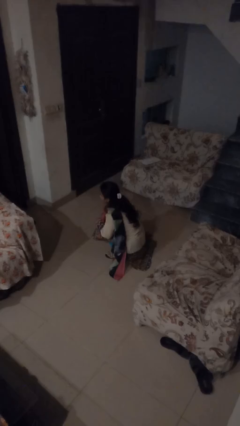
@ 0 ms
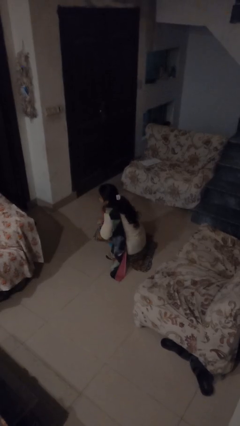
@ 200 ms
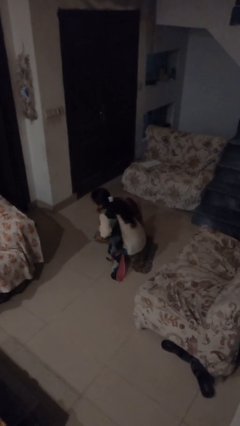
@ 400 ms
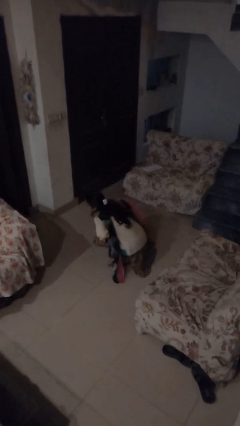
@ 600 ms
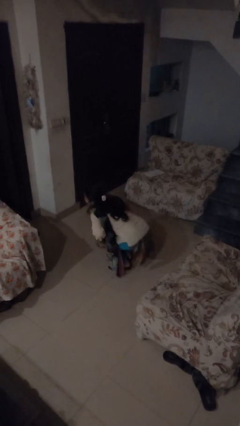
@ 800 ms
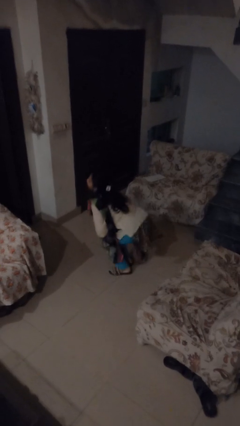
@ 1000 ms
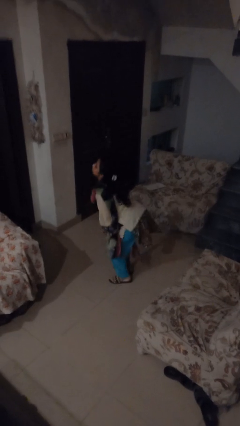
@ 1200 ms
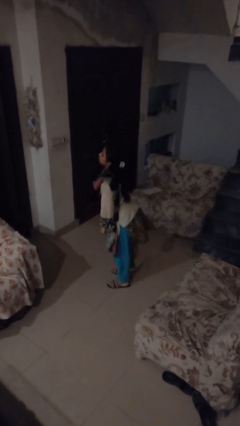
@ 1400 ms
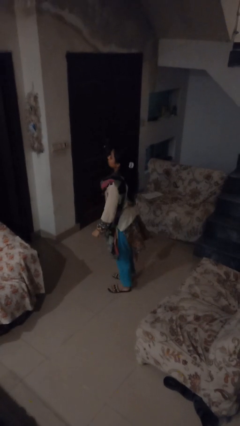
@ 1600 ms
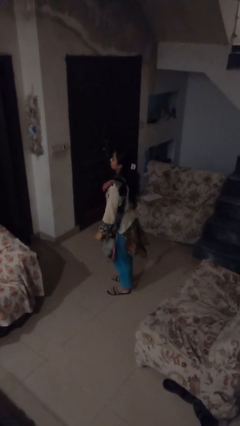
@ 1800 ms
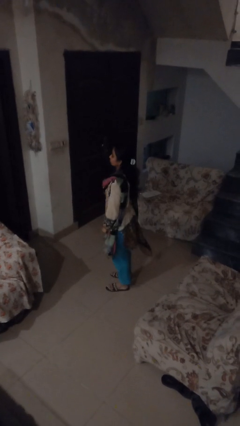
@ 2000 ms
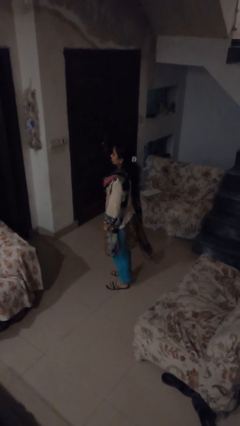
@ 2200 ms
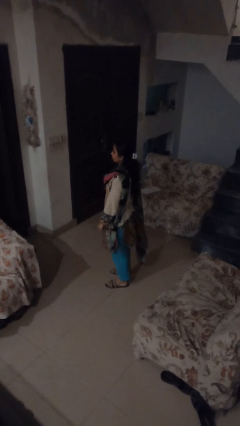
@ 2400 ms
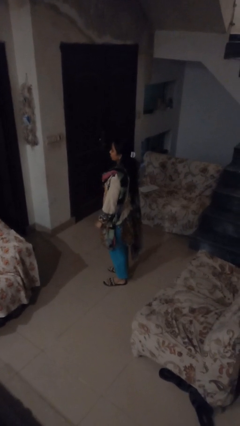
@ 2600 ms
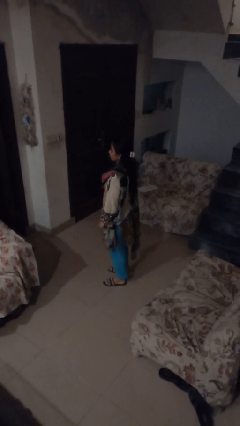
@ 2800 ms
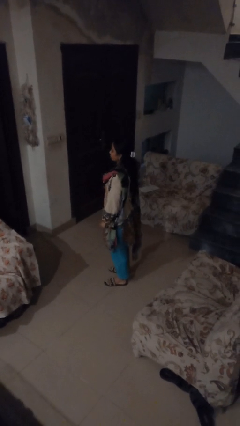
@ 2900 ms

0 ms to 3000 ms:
person stands up

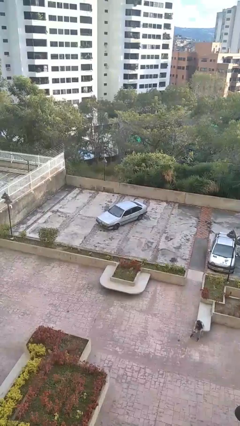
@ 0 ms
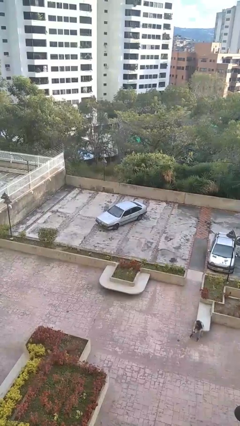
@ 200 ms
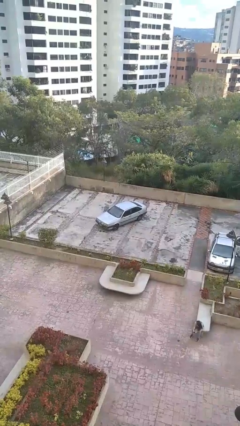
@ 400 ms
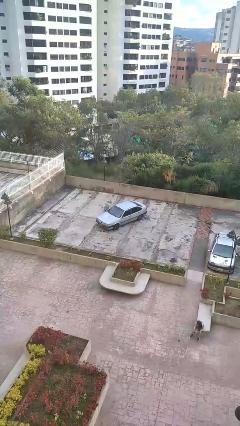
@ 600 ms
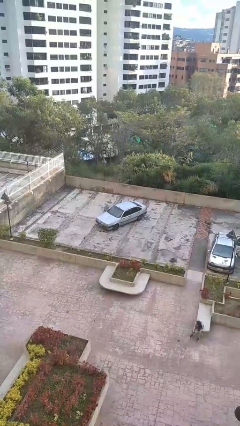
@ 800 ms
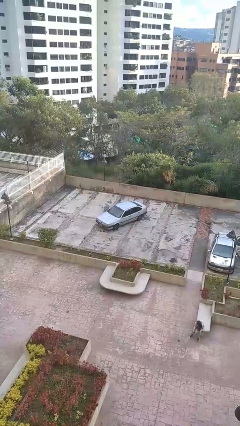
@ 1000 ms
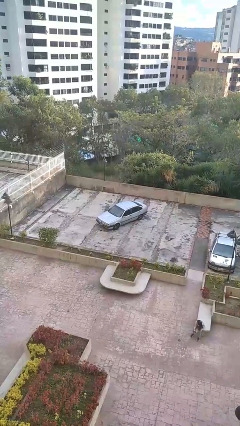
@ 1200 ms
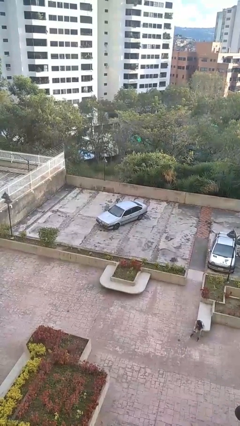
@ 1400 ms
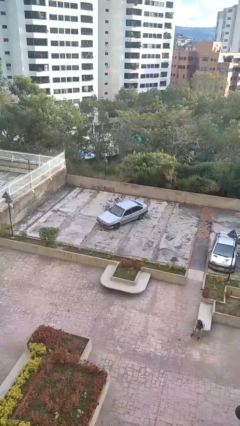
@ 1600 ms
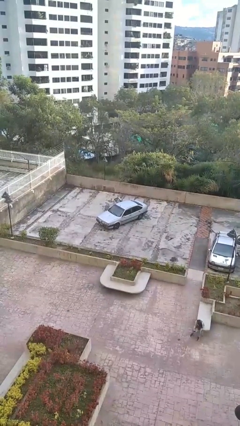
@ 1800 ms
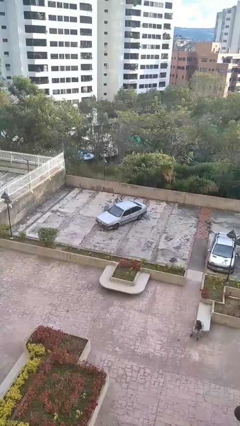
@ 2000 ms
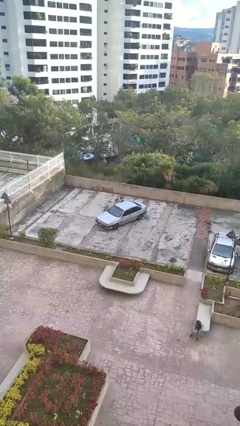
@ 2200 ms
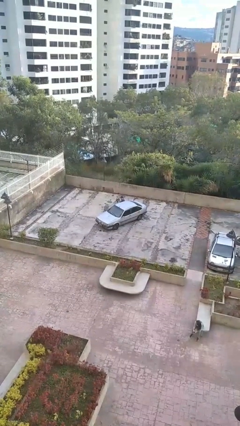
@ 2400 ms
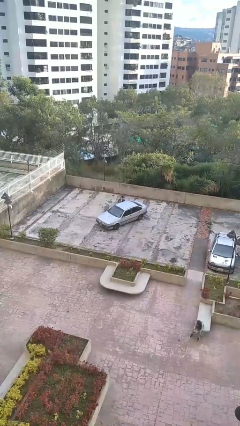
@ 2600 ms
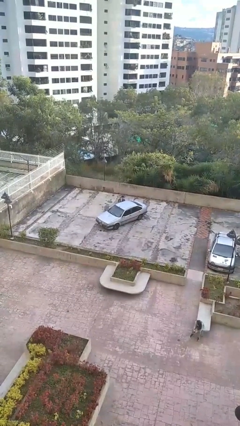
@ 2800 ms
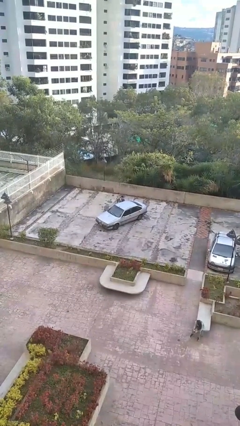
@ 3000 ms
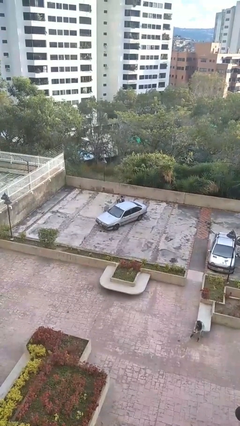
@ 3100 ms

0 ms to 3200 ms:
car drops off person

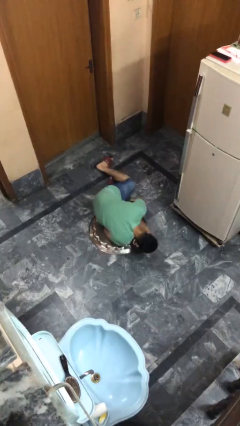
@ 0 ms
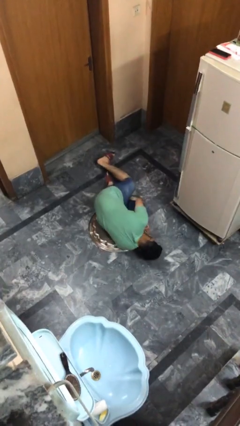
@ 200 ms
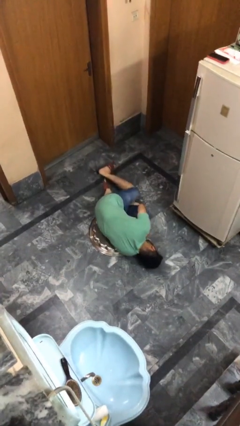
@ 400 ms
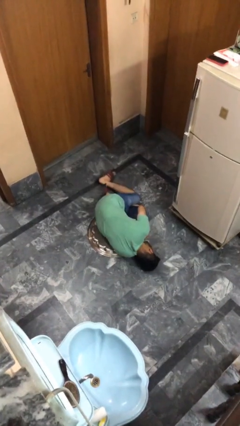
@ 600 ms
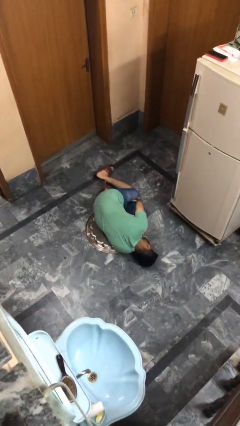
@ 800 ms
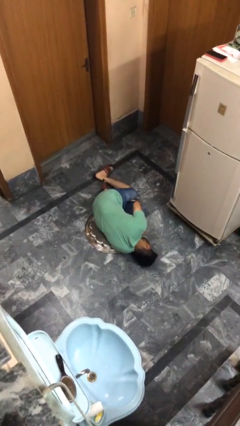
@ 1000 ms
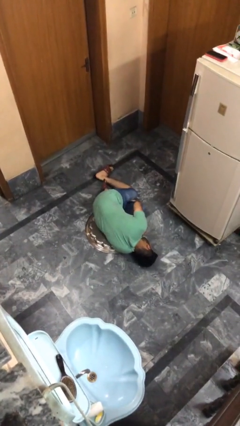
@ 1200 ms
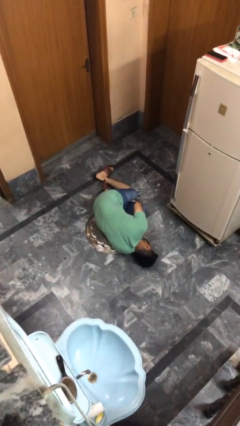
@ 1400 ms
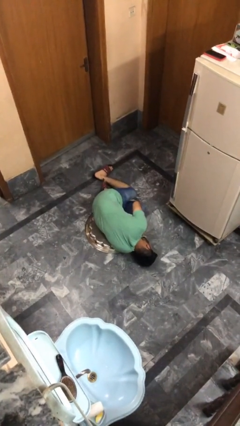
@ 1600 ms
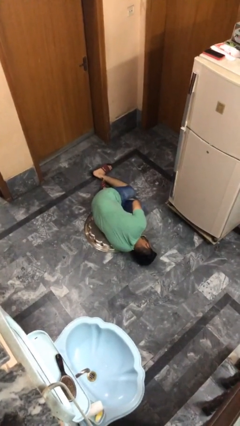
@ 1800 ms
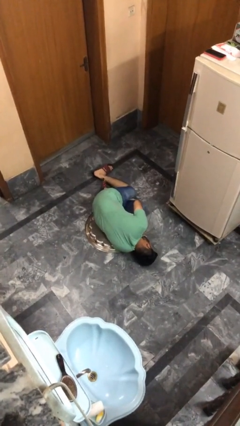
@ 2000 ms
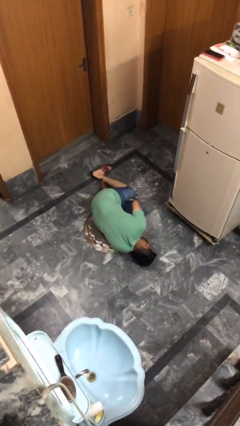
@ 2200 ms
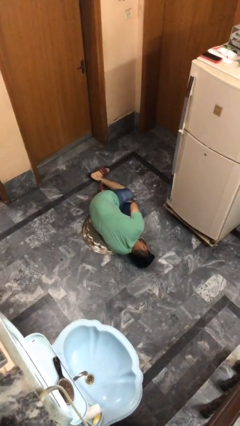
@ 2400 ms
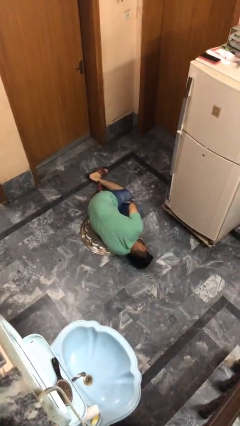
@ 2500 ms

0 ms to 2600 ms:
person lies down on floor

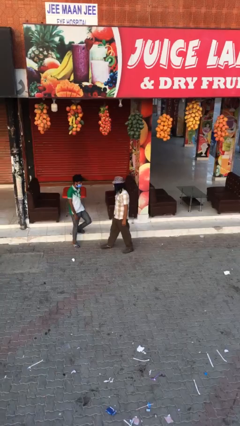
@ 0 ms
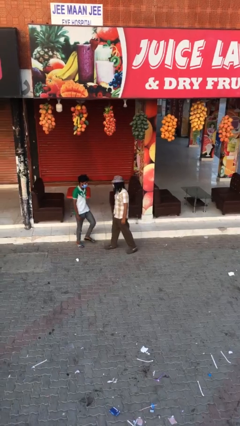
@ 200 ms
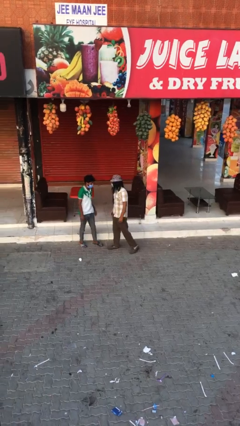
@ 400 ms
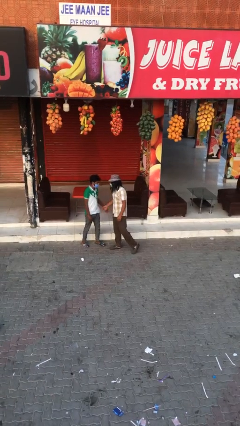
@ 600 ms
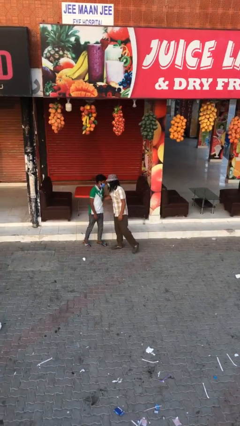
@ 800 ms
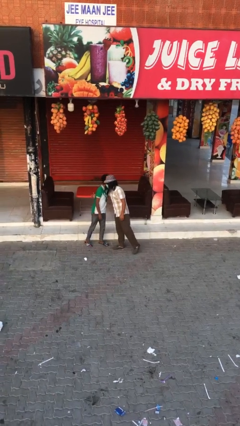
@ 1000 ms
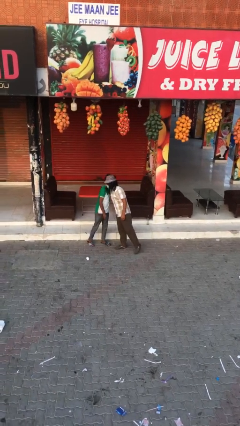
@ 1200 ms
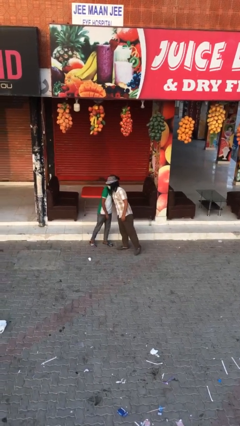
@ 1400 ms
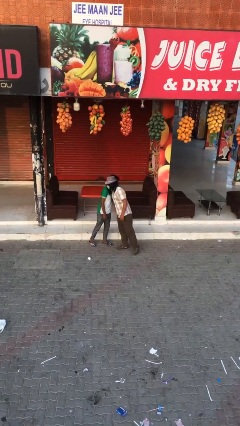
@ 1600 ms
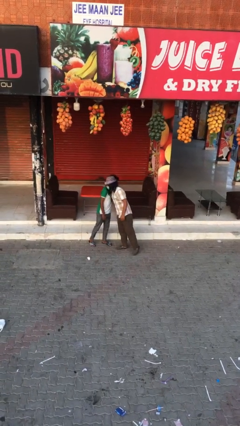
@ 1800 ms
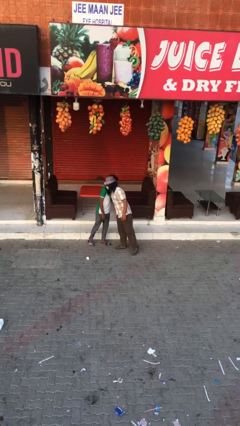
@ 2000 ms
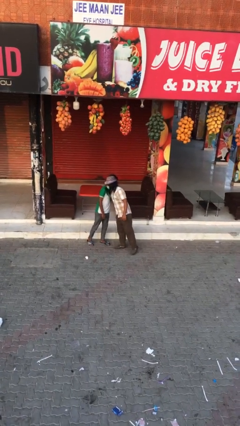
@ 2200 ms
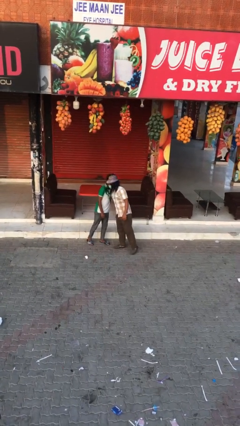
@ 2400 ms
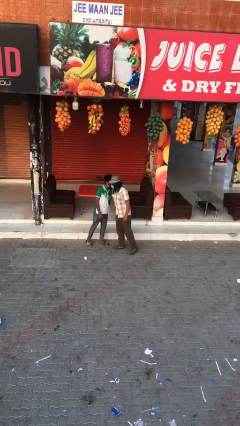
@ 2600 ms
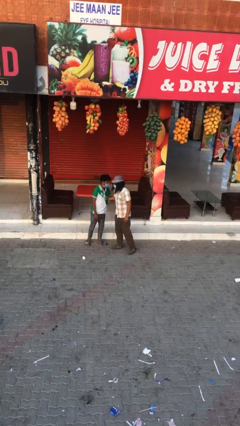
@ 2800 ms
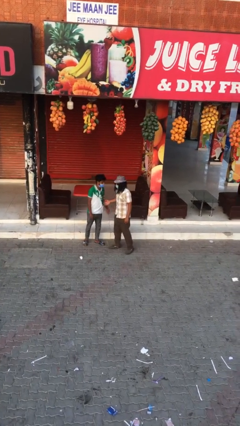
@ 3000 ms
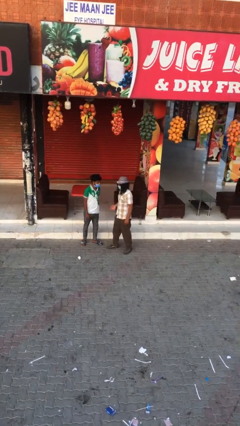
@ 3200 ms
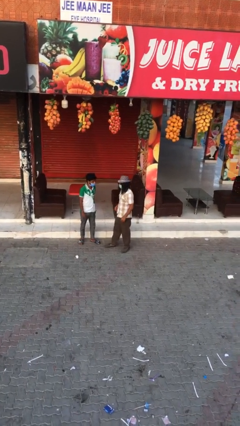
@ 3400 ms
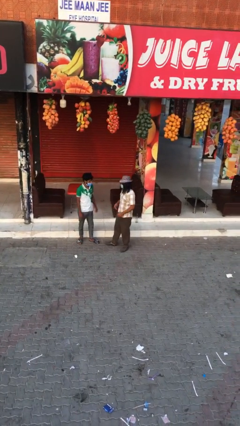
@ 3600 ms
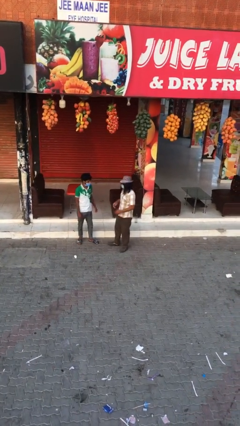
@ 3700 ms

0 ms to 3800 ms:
person embraces person

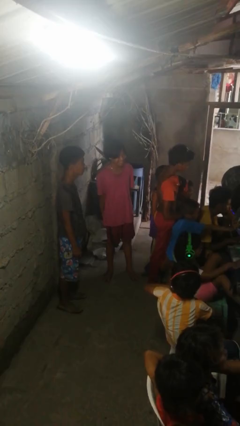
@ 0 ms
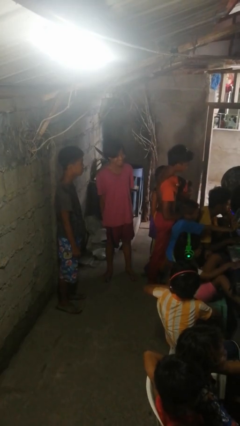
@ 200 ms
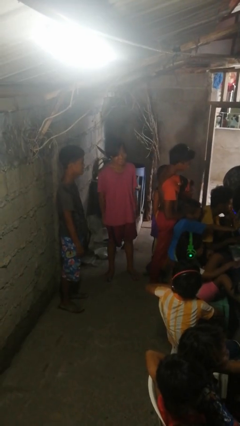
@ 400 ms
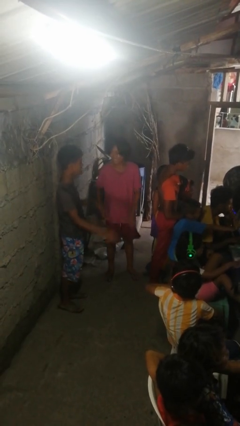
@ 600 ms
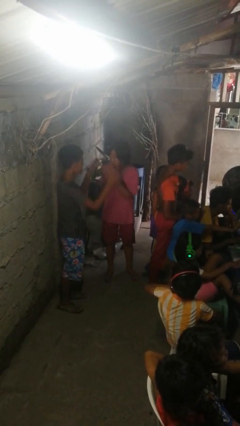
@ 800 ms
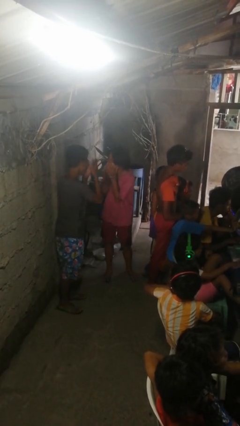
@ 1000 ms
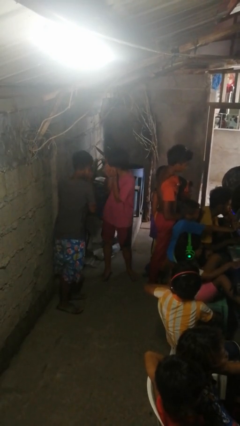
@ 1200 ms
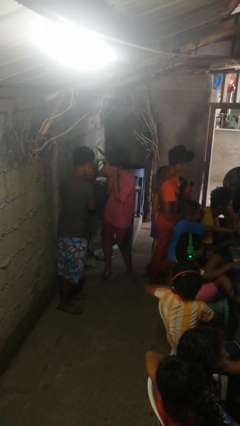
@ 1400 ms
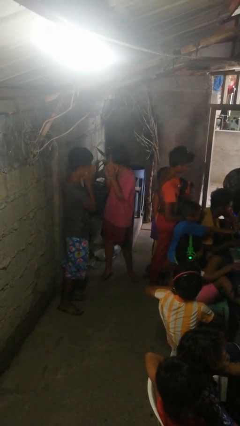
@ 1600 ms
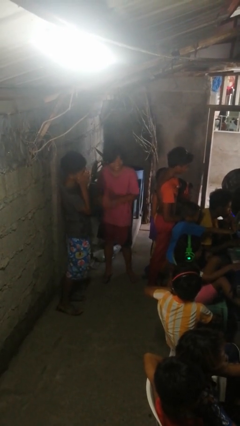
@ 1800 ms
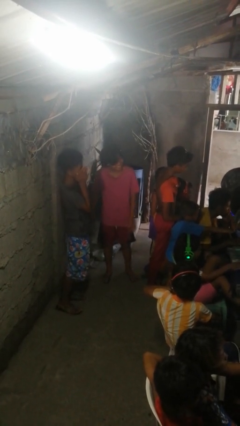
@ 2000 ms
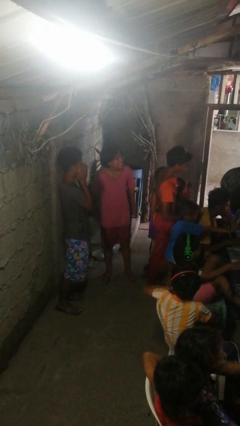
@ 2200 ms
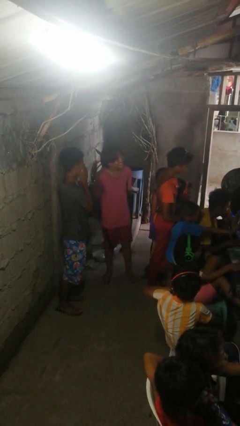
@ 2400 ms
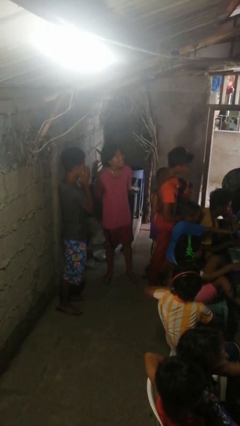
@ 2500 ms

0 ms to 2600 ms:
person laughs with person

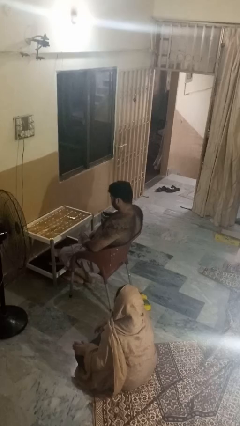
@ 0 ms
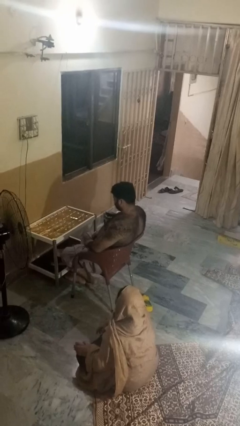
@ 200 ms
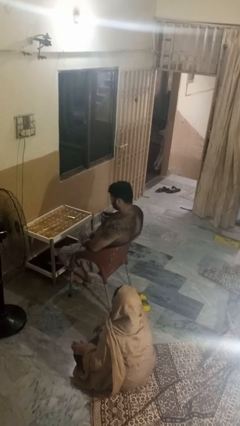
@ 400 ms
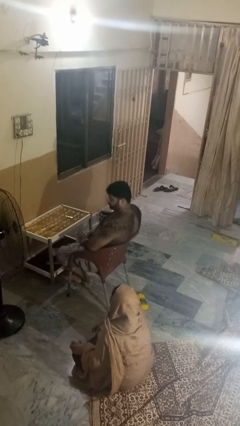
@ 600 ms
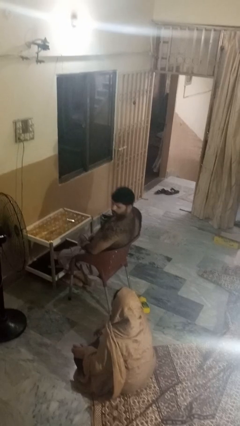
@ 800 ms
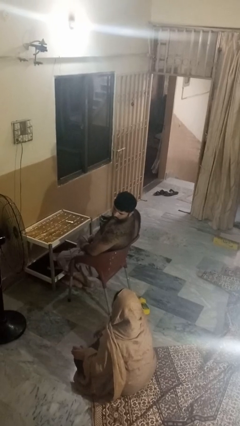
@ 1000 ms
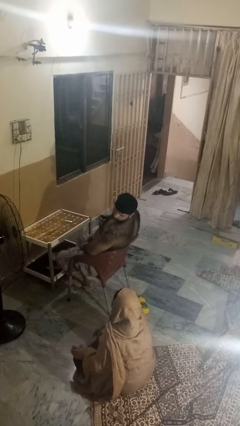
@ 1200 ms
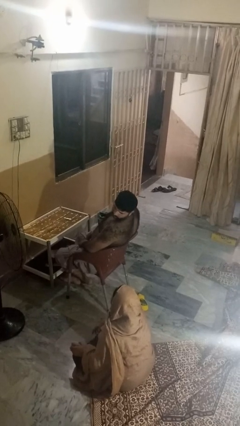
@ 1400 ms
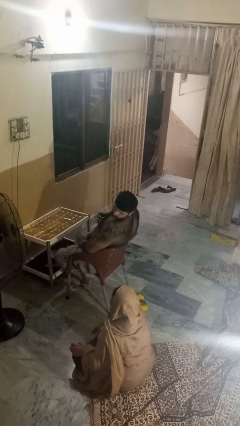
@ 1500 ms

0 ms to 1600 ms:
person looks over shoulder

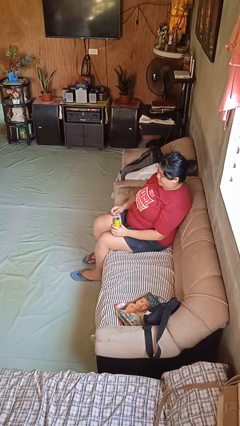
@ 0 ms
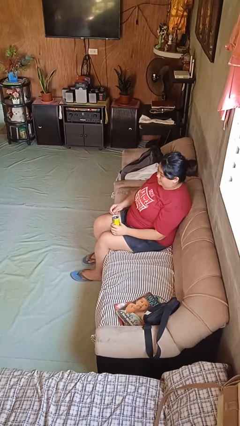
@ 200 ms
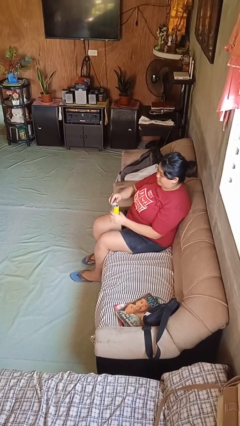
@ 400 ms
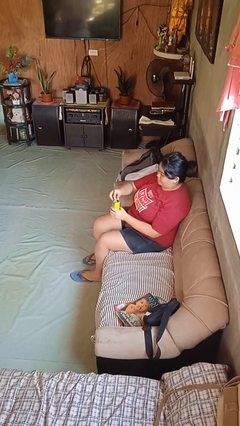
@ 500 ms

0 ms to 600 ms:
person opens beverage can
